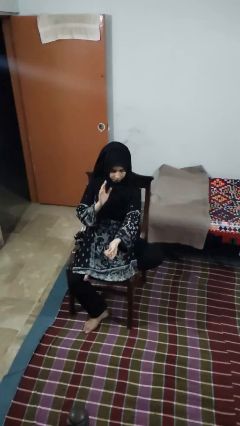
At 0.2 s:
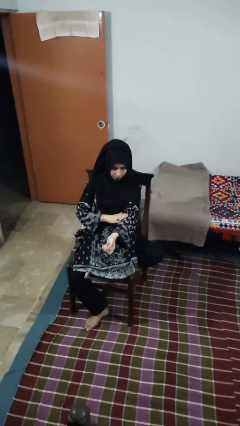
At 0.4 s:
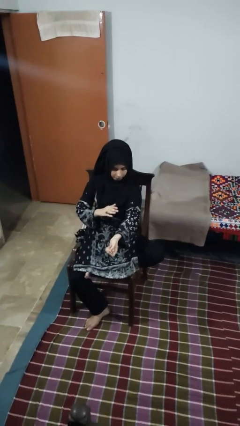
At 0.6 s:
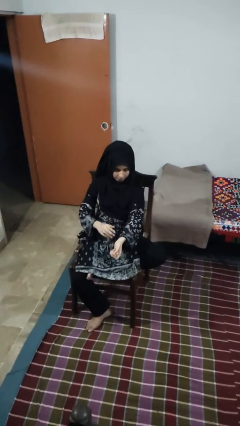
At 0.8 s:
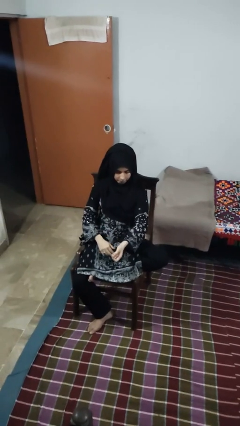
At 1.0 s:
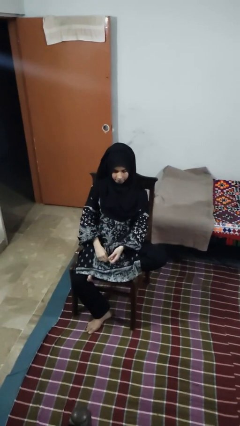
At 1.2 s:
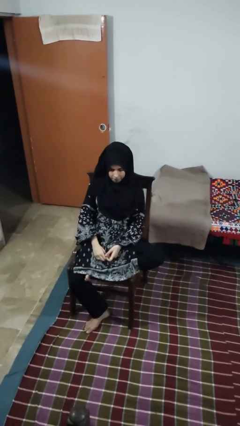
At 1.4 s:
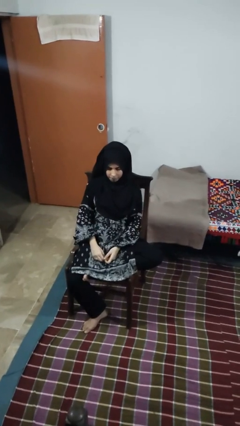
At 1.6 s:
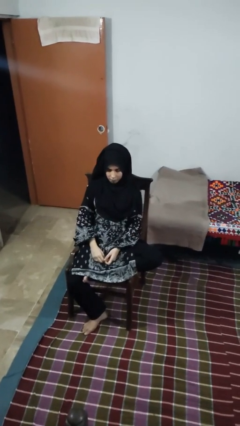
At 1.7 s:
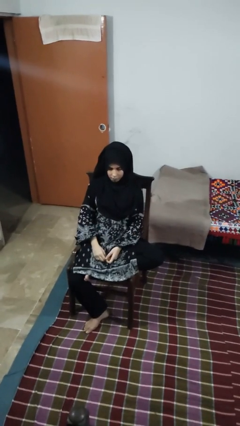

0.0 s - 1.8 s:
person swats bug

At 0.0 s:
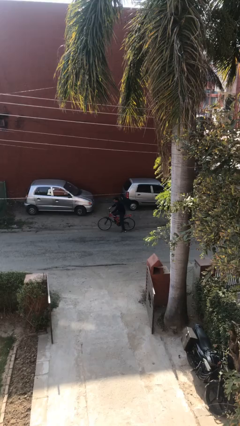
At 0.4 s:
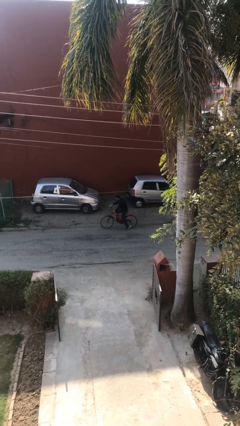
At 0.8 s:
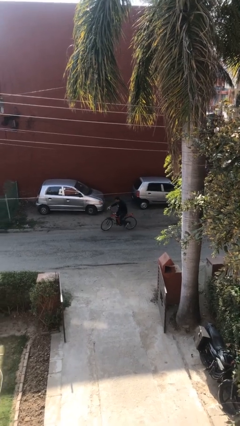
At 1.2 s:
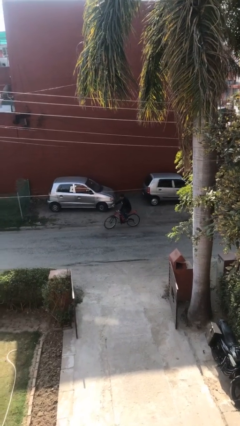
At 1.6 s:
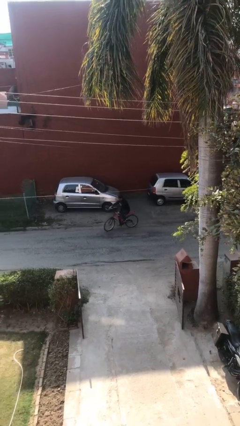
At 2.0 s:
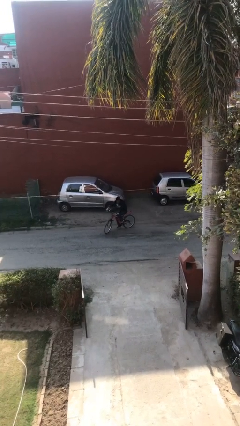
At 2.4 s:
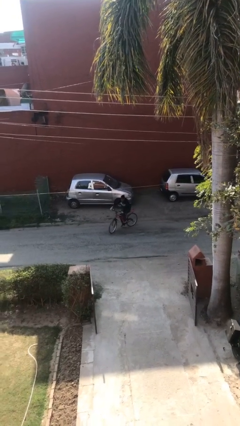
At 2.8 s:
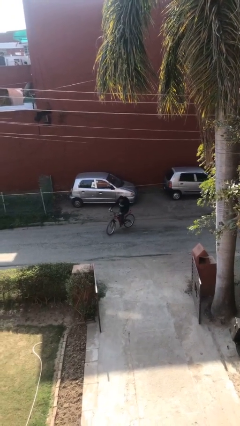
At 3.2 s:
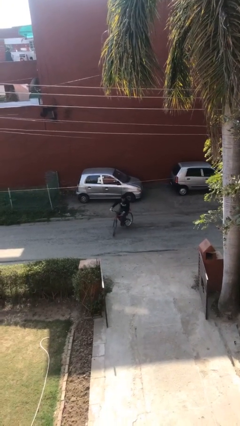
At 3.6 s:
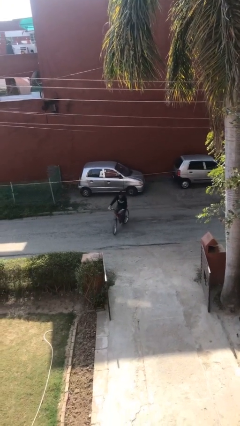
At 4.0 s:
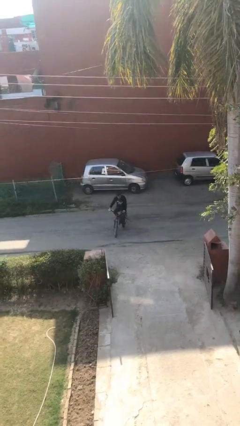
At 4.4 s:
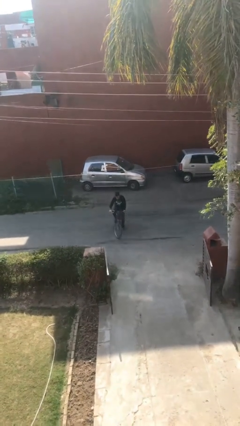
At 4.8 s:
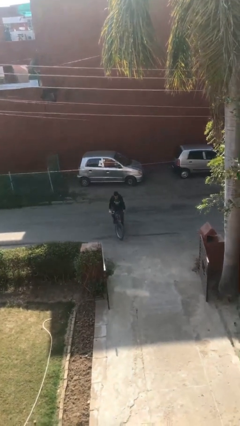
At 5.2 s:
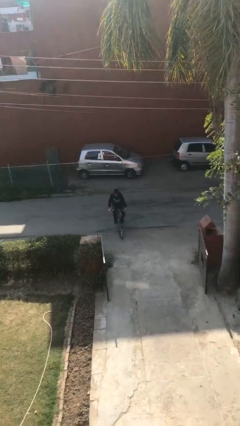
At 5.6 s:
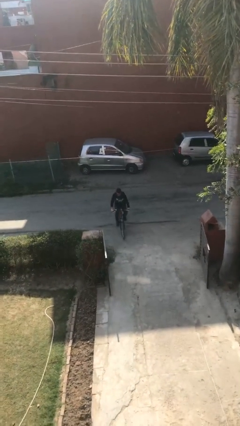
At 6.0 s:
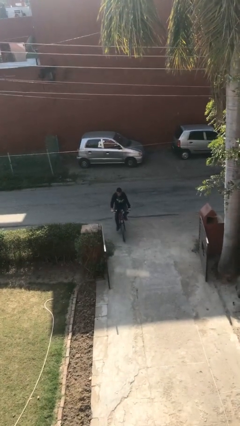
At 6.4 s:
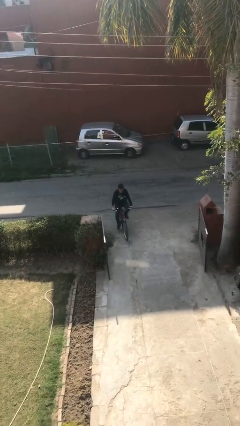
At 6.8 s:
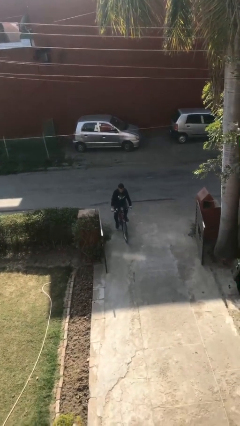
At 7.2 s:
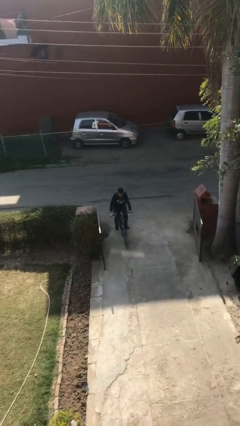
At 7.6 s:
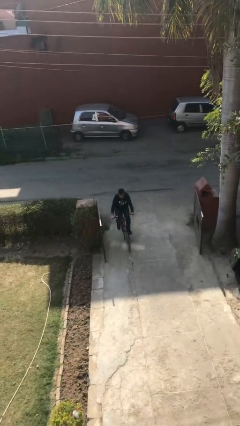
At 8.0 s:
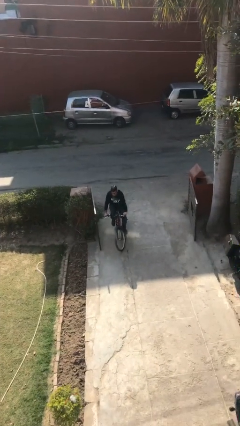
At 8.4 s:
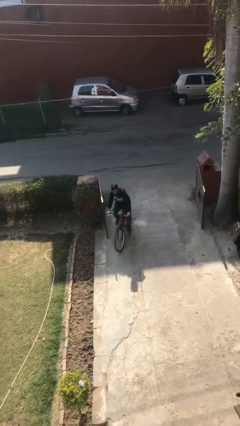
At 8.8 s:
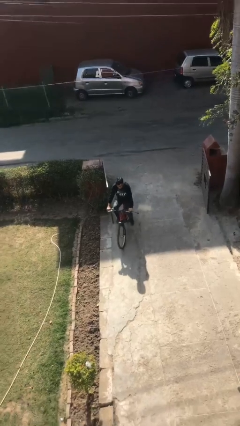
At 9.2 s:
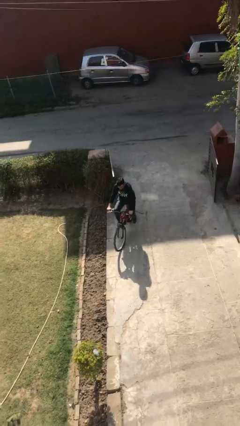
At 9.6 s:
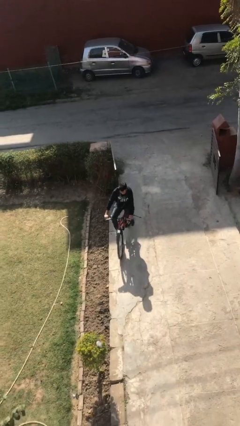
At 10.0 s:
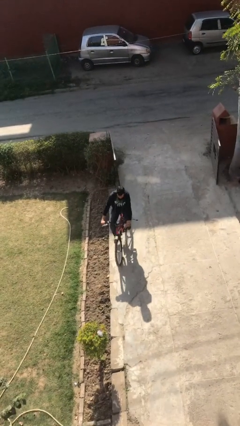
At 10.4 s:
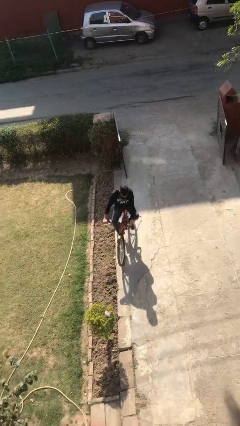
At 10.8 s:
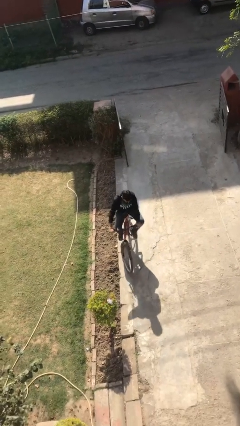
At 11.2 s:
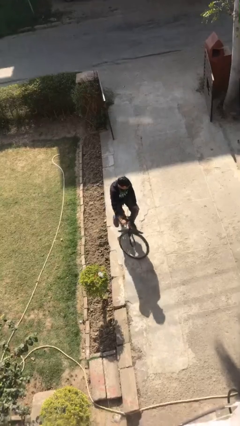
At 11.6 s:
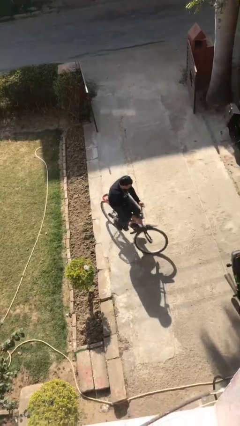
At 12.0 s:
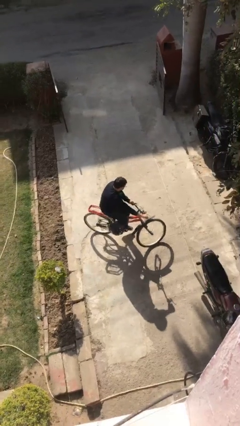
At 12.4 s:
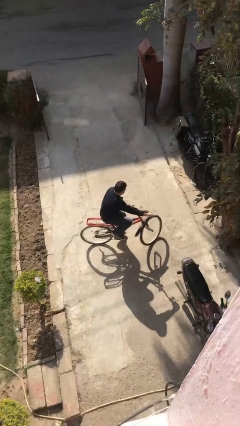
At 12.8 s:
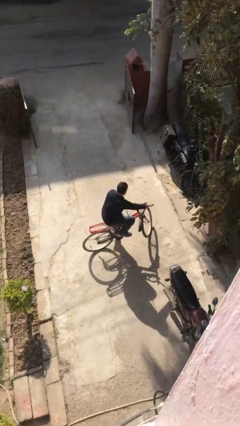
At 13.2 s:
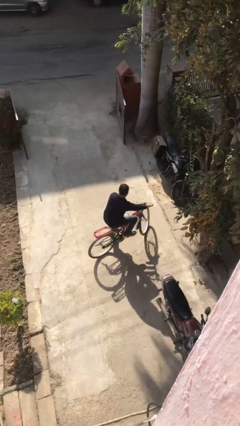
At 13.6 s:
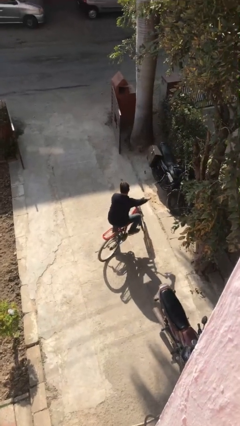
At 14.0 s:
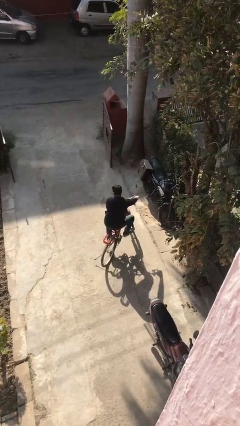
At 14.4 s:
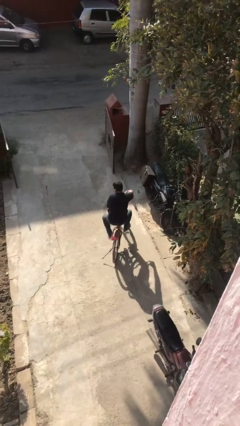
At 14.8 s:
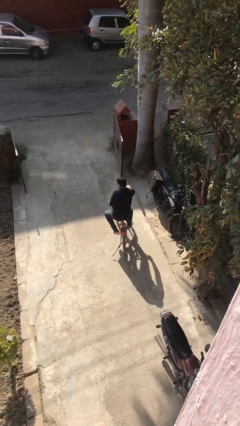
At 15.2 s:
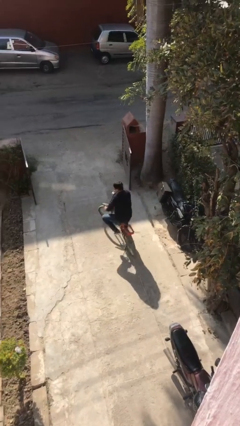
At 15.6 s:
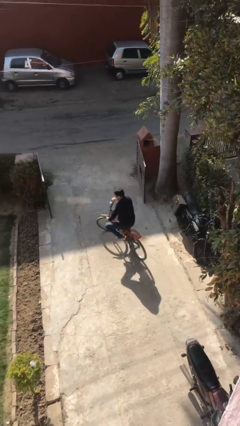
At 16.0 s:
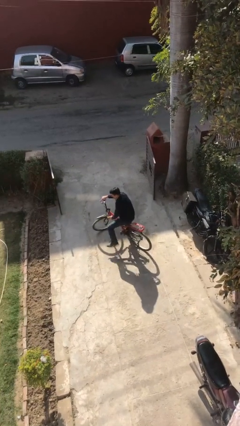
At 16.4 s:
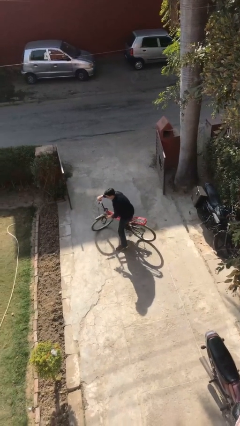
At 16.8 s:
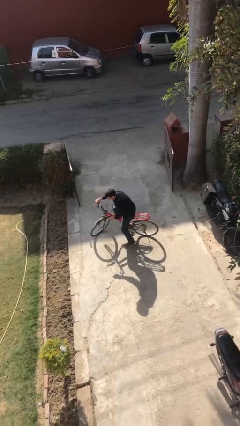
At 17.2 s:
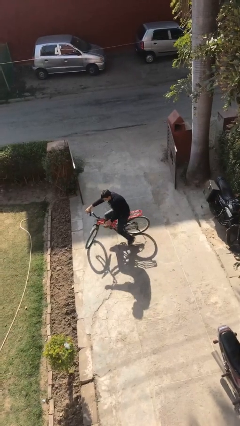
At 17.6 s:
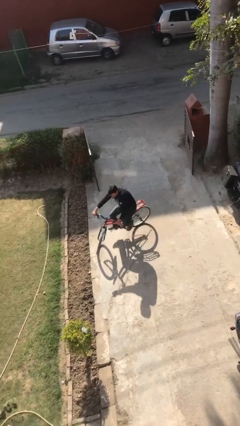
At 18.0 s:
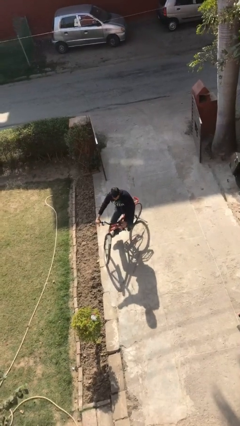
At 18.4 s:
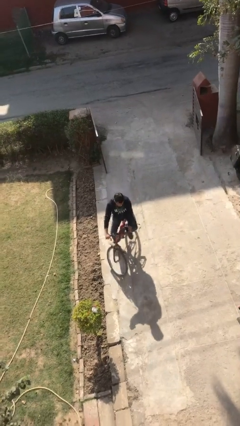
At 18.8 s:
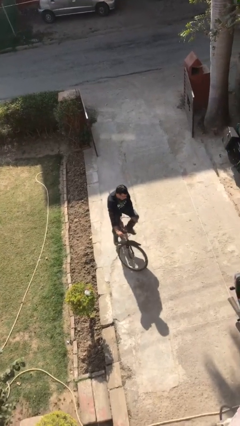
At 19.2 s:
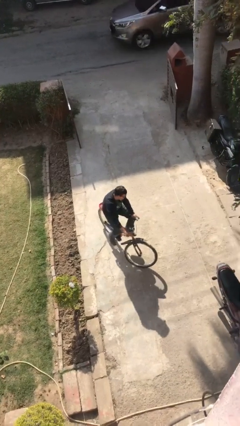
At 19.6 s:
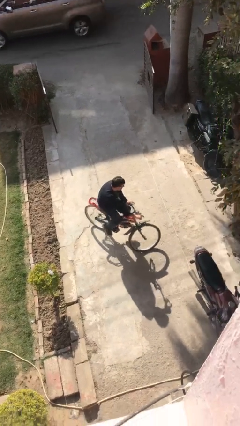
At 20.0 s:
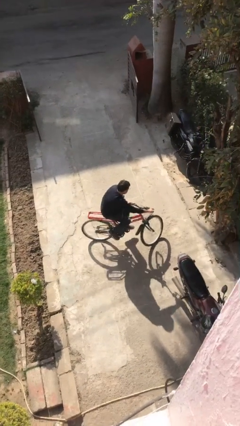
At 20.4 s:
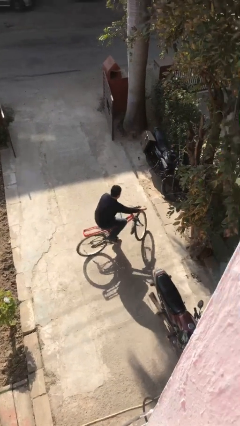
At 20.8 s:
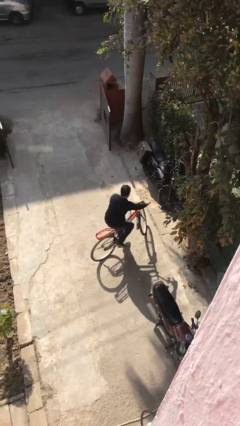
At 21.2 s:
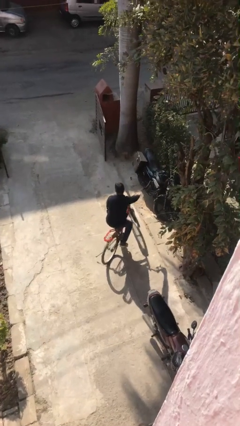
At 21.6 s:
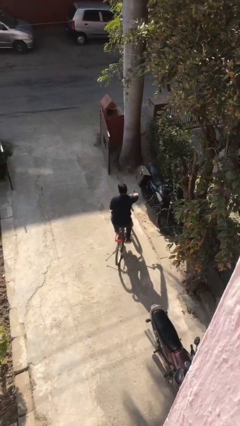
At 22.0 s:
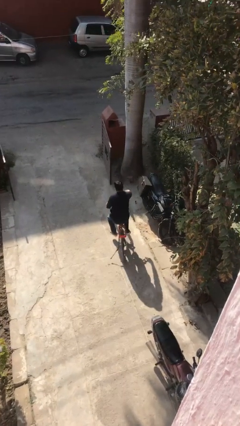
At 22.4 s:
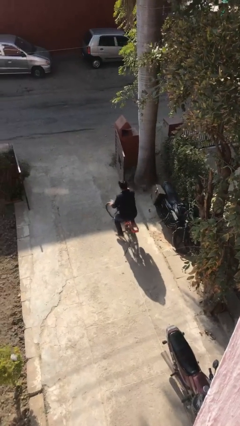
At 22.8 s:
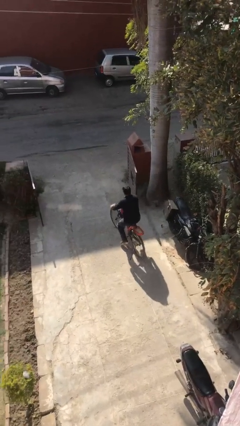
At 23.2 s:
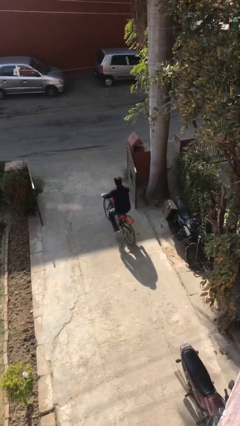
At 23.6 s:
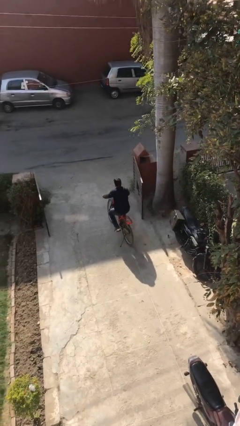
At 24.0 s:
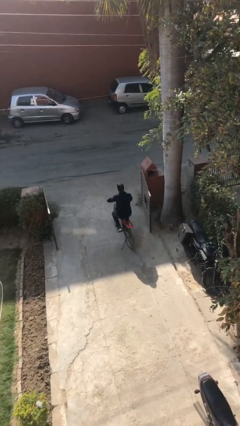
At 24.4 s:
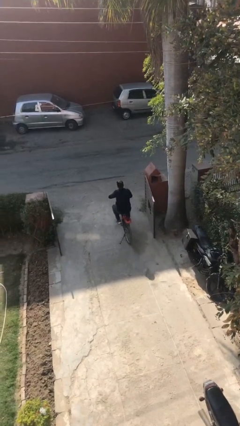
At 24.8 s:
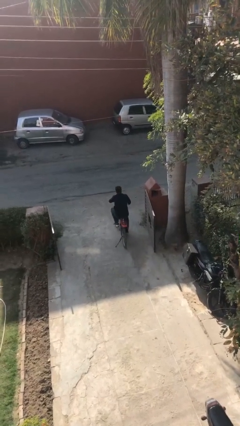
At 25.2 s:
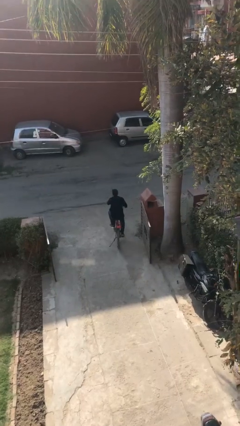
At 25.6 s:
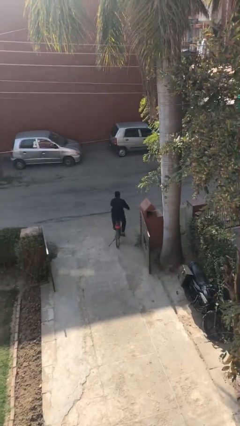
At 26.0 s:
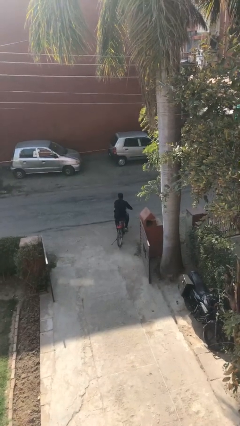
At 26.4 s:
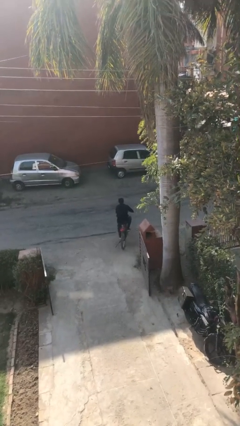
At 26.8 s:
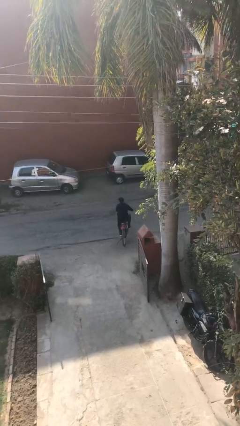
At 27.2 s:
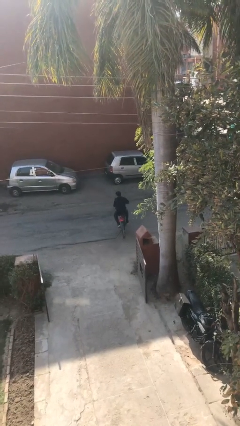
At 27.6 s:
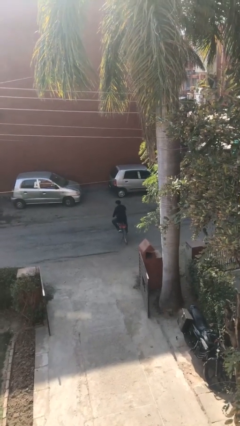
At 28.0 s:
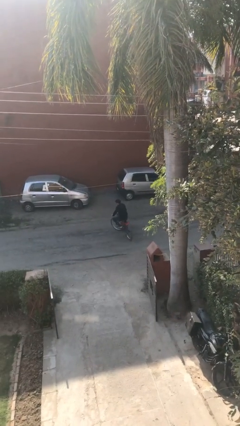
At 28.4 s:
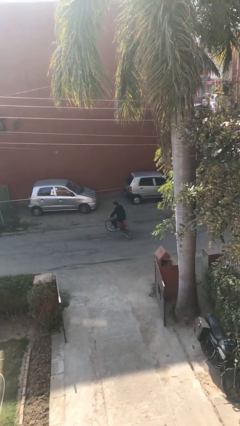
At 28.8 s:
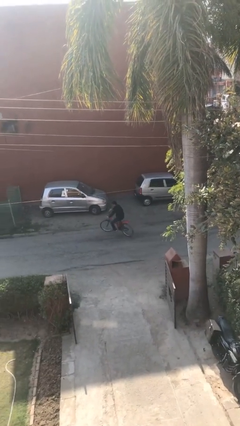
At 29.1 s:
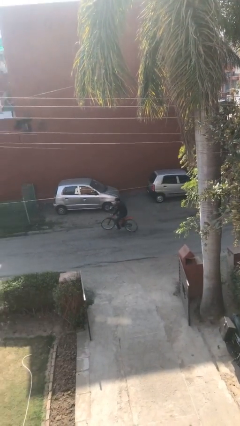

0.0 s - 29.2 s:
person rides bicycle

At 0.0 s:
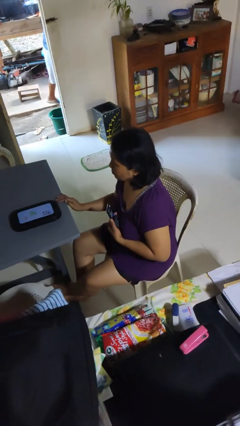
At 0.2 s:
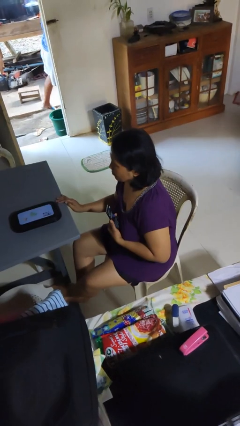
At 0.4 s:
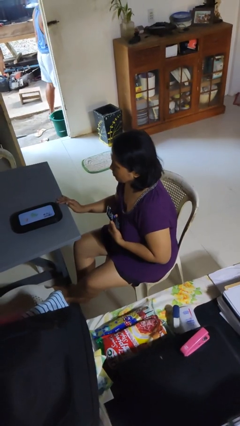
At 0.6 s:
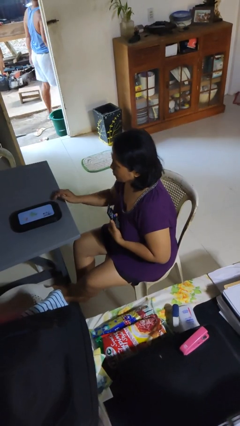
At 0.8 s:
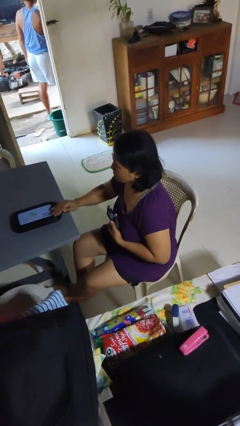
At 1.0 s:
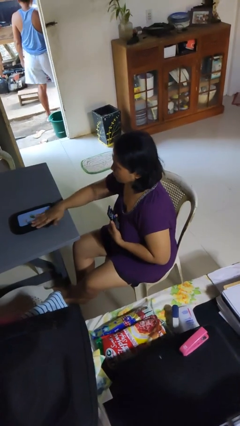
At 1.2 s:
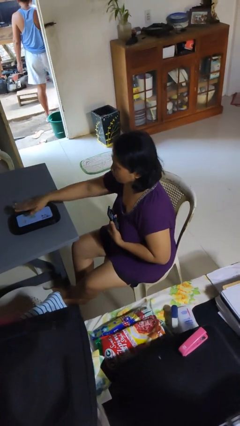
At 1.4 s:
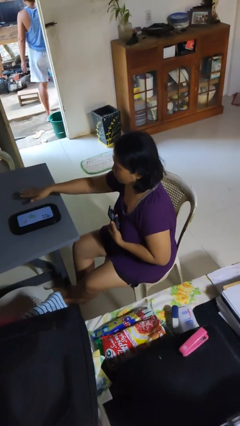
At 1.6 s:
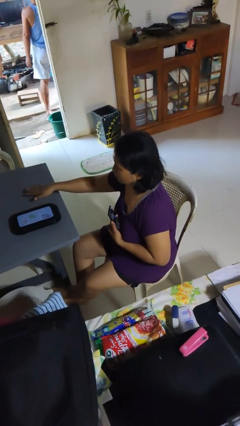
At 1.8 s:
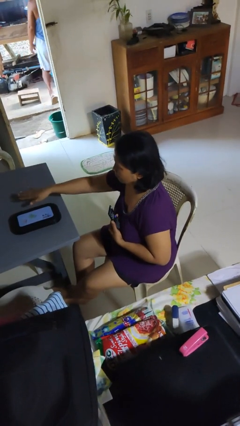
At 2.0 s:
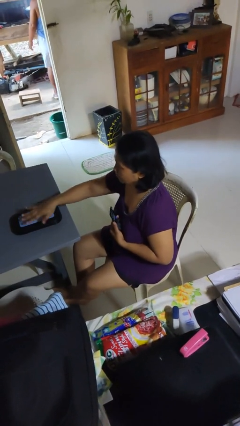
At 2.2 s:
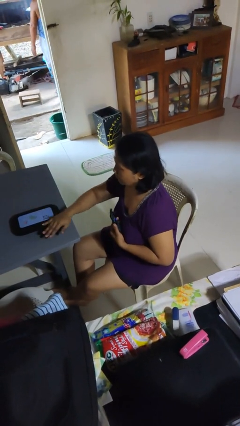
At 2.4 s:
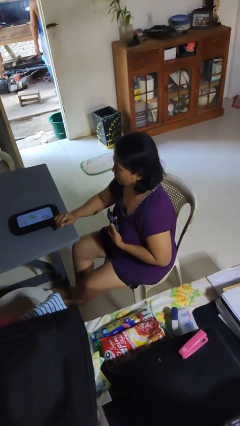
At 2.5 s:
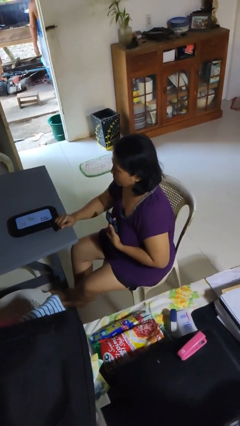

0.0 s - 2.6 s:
person waves hand over object
